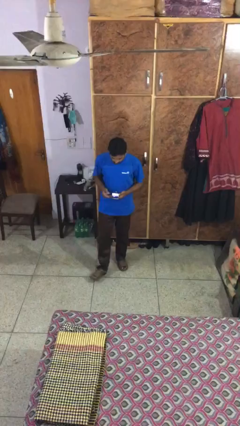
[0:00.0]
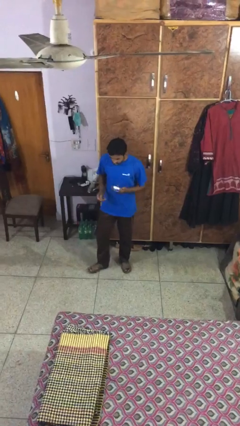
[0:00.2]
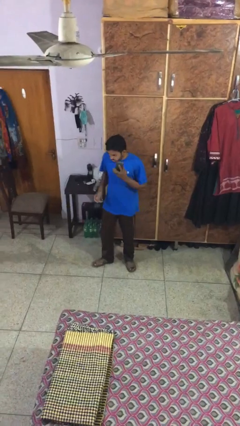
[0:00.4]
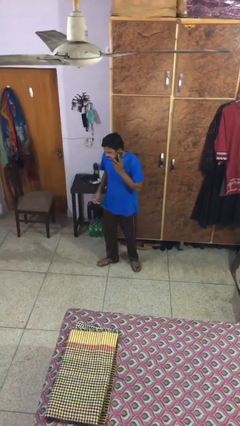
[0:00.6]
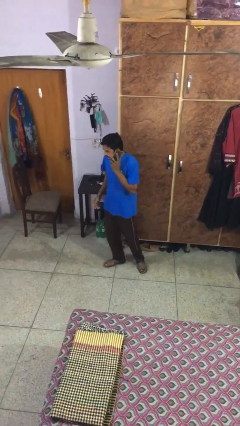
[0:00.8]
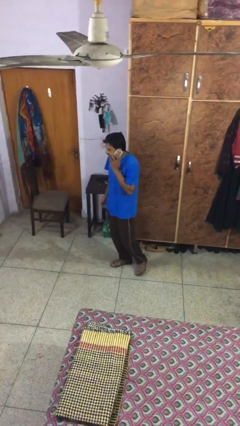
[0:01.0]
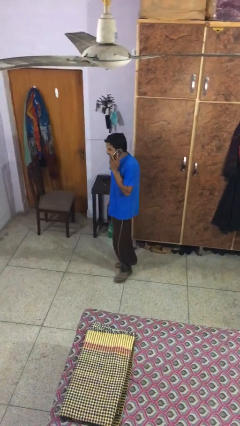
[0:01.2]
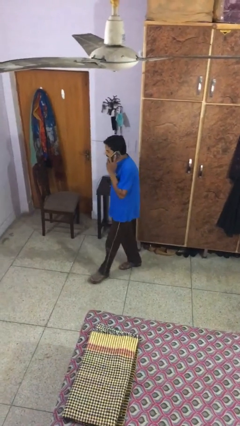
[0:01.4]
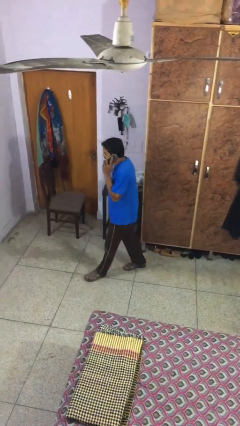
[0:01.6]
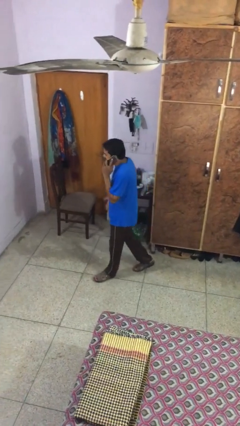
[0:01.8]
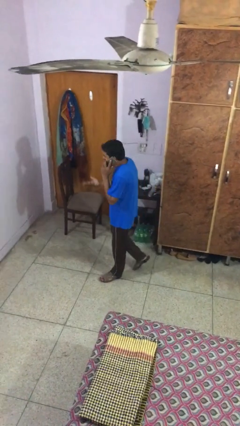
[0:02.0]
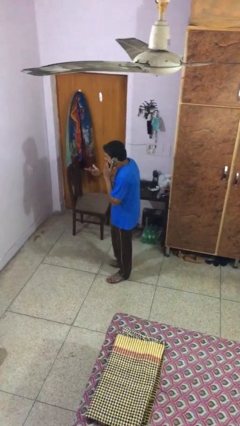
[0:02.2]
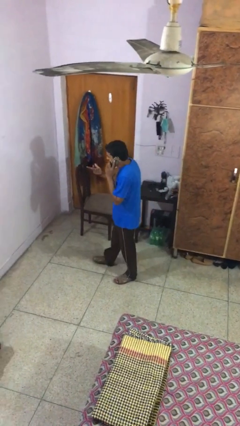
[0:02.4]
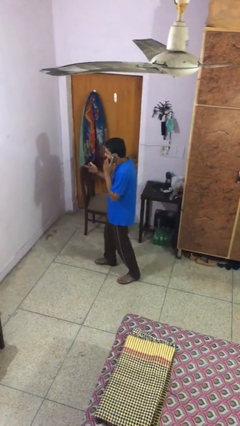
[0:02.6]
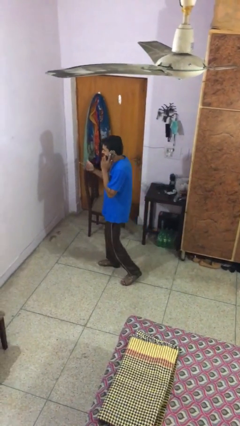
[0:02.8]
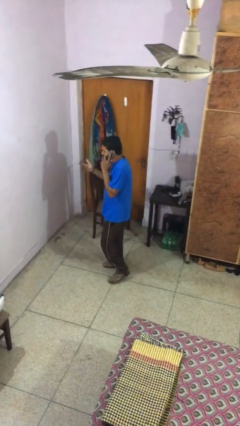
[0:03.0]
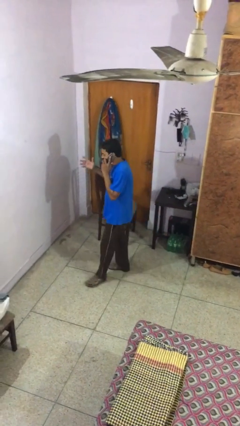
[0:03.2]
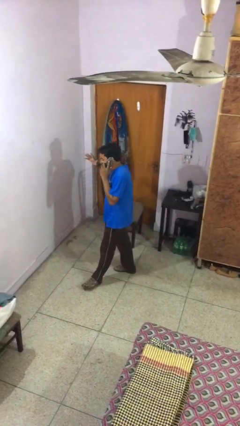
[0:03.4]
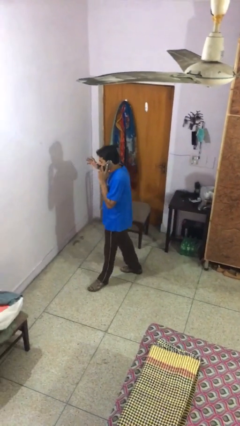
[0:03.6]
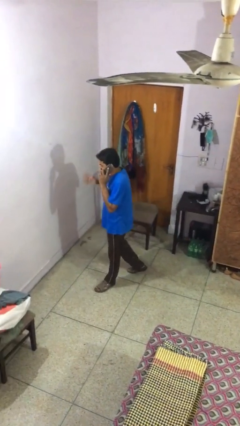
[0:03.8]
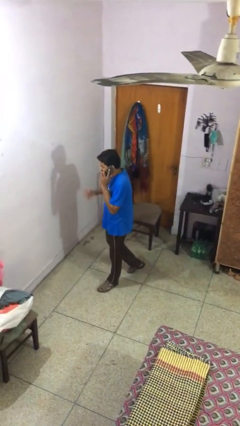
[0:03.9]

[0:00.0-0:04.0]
person talks on phone

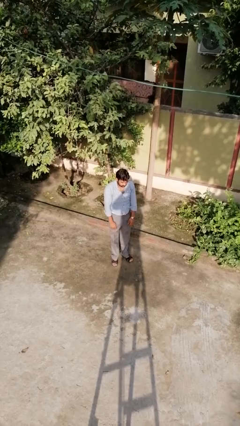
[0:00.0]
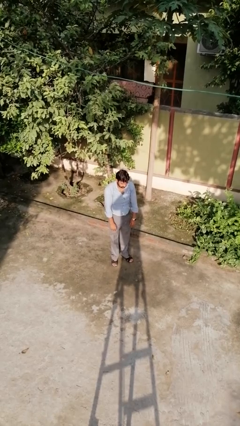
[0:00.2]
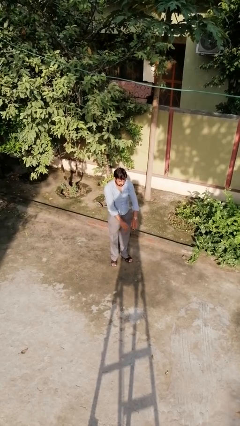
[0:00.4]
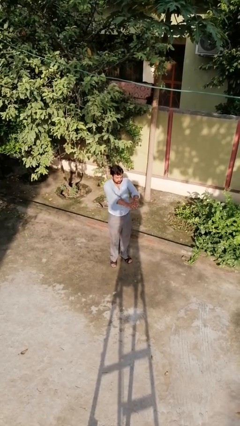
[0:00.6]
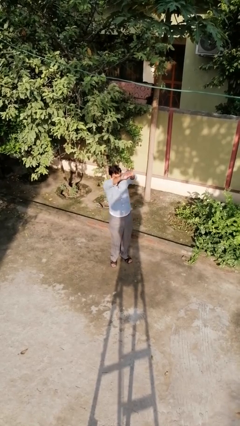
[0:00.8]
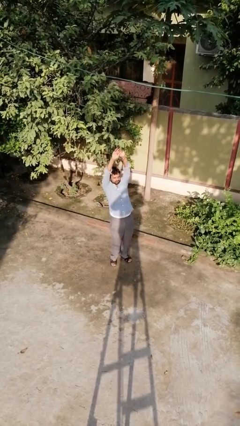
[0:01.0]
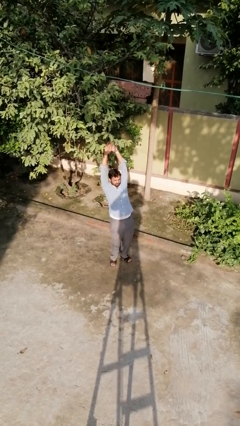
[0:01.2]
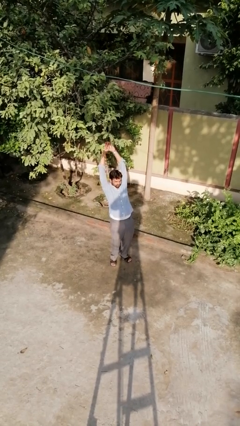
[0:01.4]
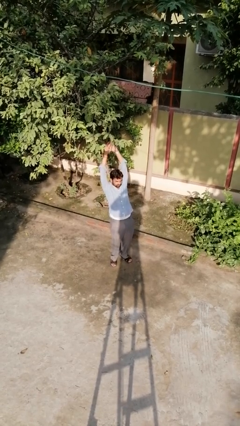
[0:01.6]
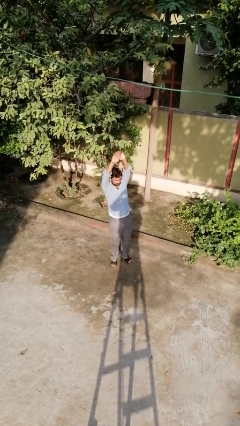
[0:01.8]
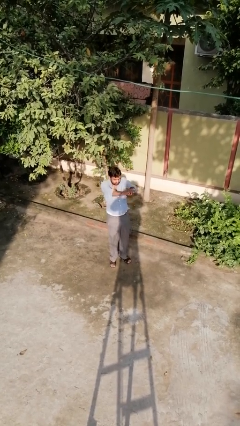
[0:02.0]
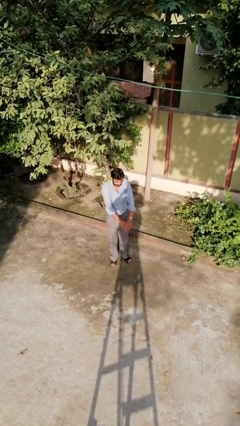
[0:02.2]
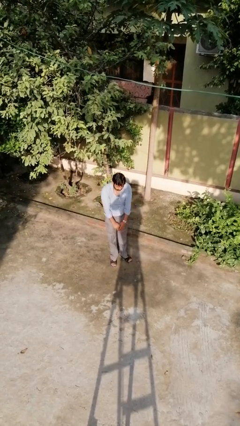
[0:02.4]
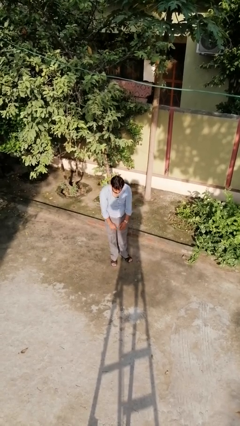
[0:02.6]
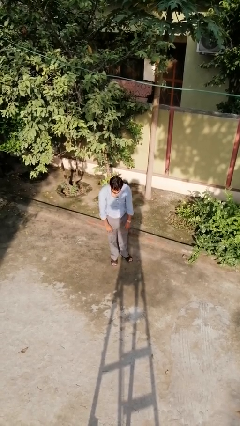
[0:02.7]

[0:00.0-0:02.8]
person stretches arms over head

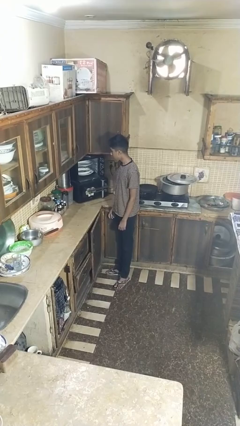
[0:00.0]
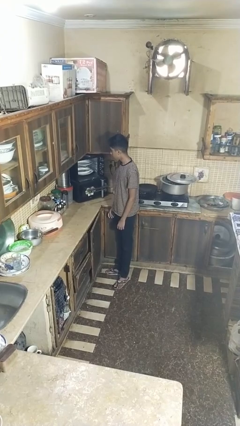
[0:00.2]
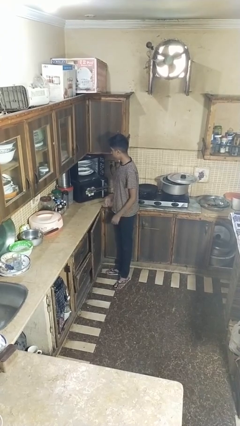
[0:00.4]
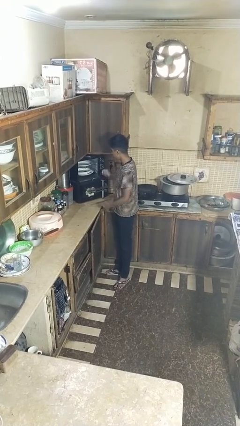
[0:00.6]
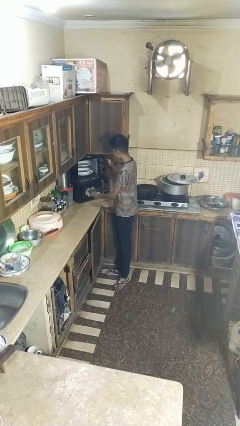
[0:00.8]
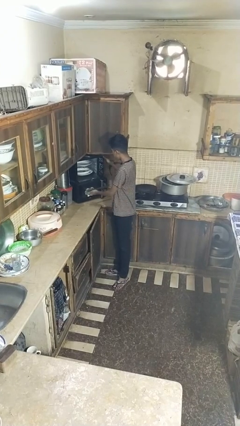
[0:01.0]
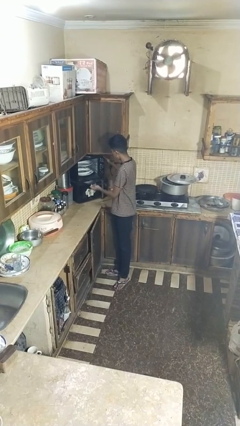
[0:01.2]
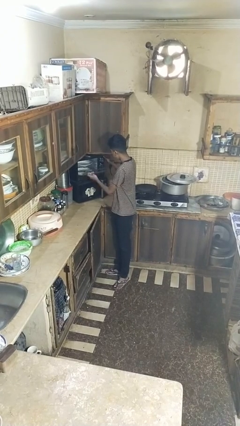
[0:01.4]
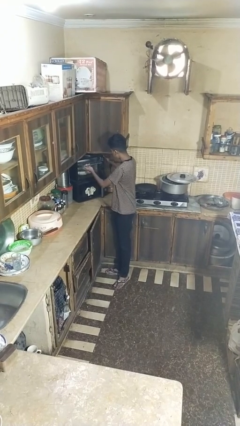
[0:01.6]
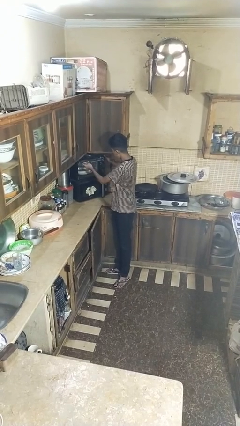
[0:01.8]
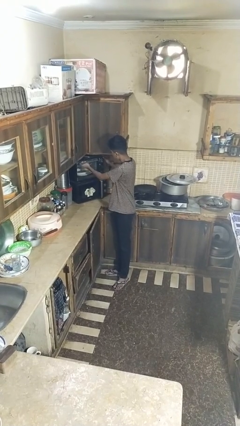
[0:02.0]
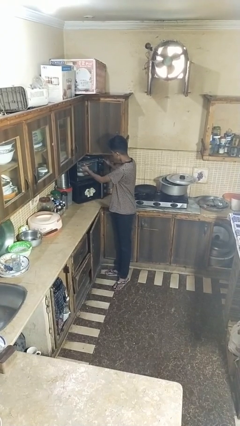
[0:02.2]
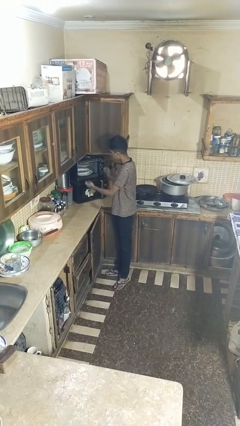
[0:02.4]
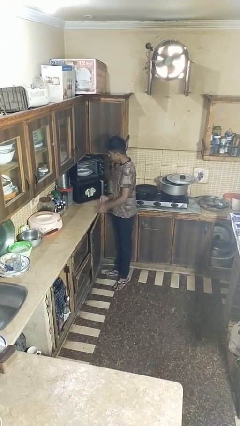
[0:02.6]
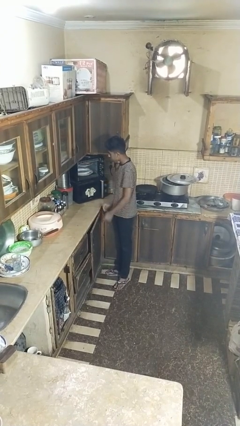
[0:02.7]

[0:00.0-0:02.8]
person closes dishwasher

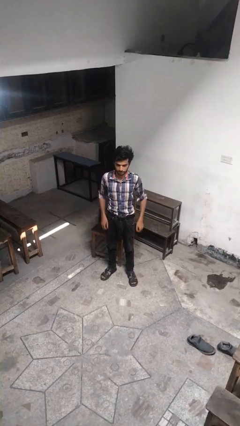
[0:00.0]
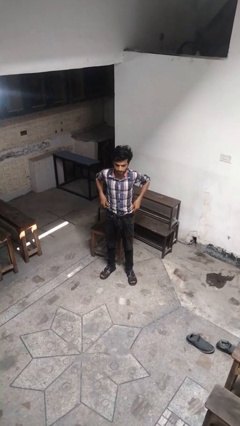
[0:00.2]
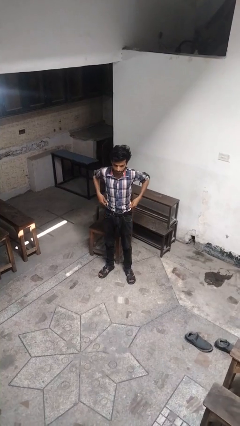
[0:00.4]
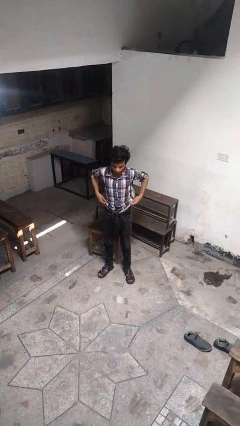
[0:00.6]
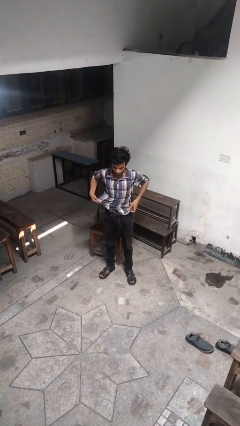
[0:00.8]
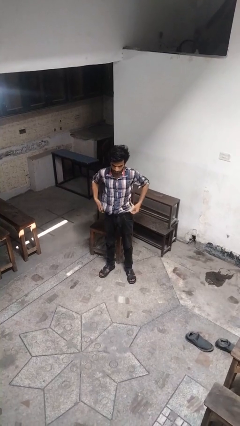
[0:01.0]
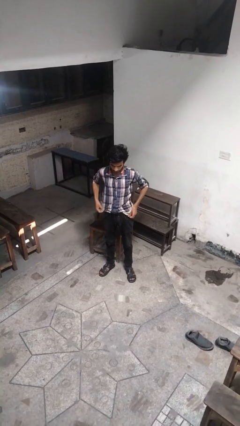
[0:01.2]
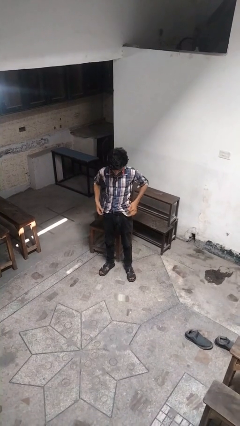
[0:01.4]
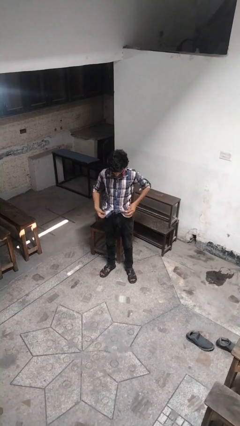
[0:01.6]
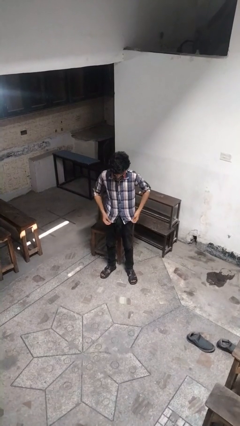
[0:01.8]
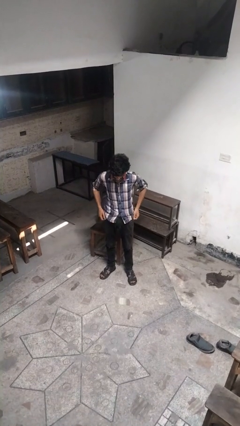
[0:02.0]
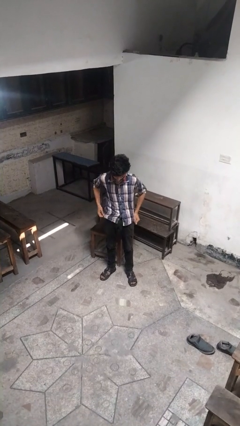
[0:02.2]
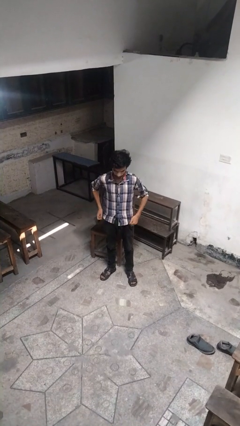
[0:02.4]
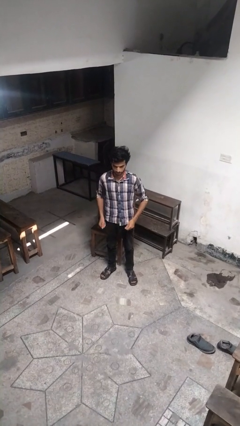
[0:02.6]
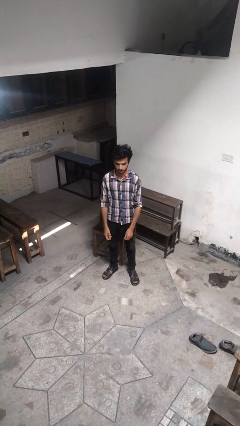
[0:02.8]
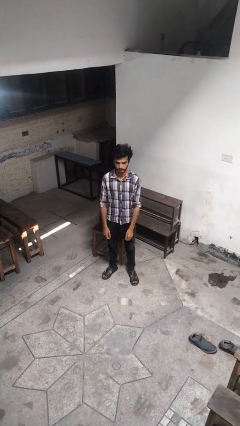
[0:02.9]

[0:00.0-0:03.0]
person untucks shirt

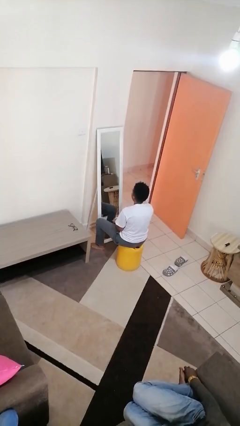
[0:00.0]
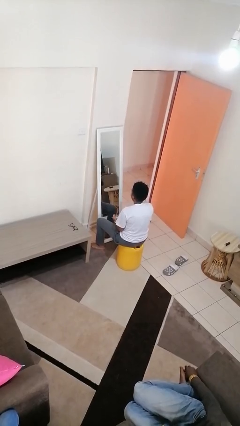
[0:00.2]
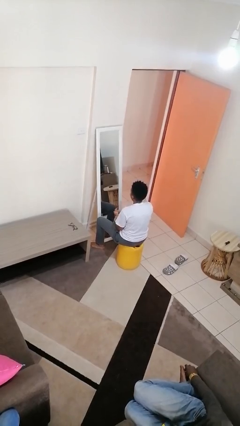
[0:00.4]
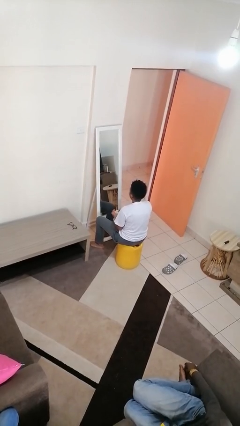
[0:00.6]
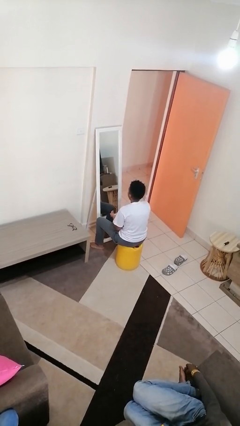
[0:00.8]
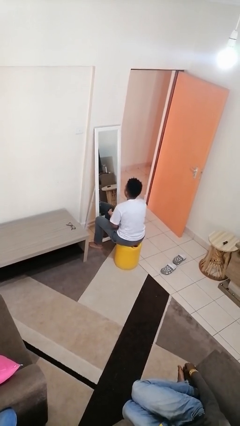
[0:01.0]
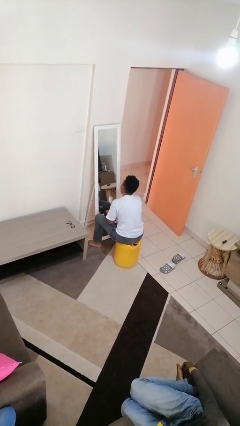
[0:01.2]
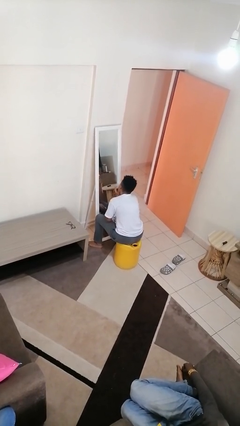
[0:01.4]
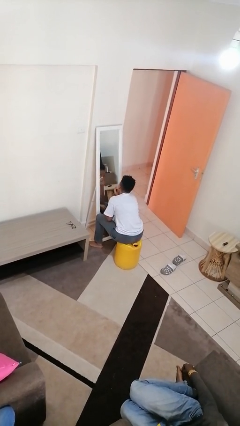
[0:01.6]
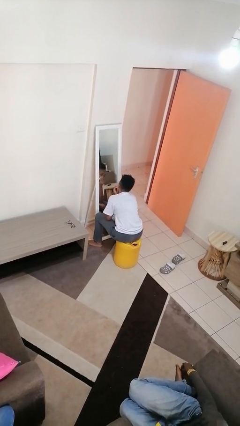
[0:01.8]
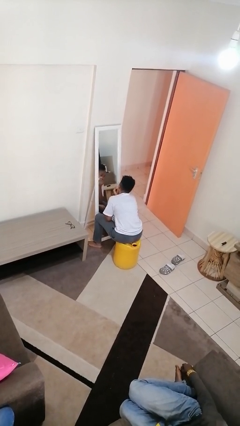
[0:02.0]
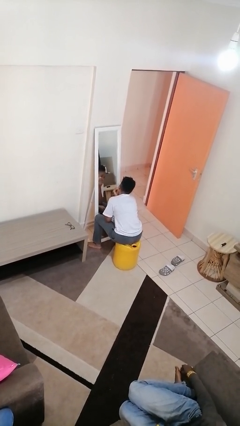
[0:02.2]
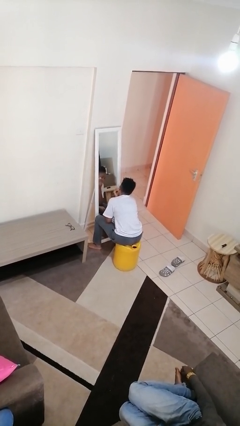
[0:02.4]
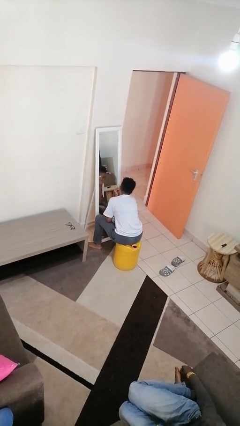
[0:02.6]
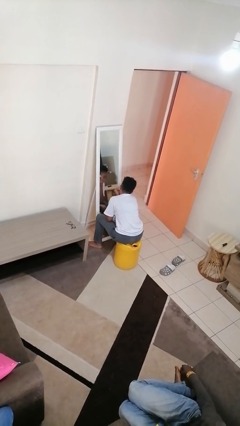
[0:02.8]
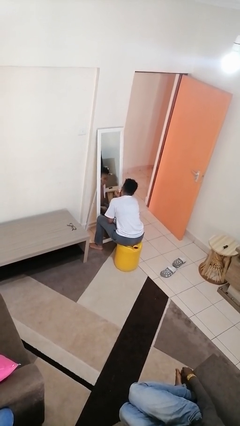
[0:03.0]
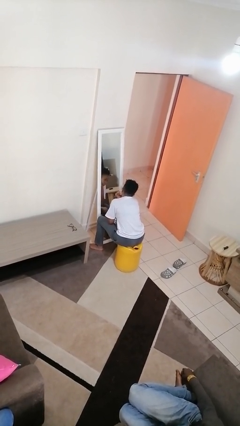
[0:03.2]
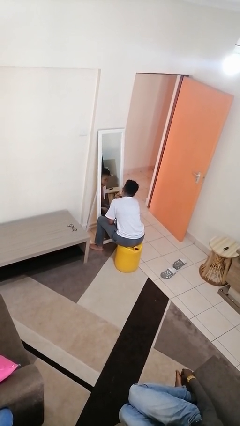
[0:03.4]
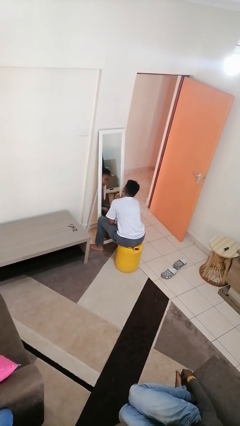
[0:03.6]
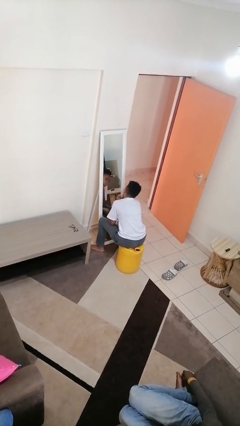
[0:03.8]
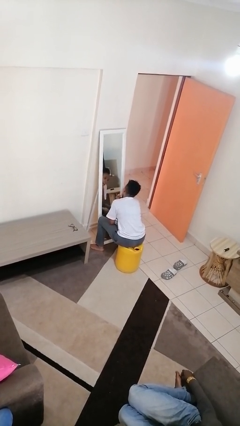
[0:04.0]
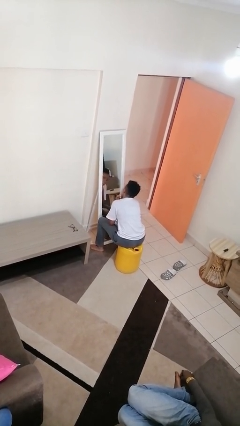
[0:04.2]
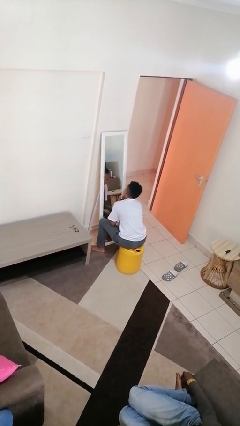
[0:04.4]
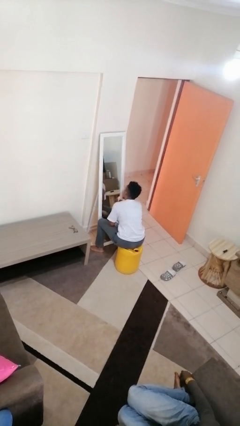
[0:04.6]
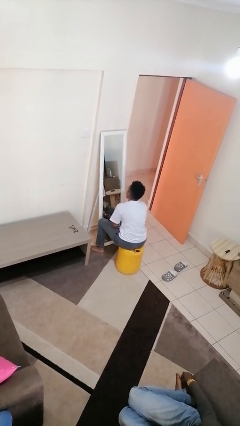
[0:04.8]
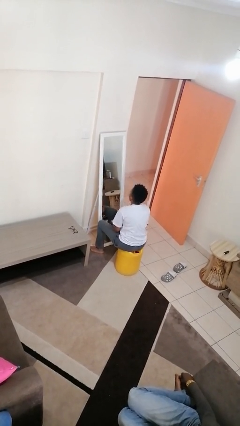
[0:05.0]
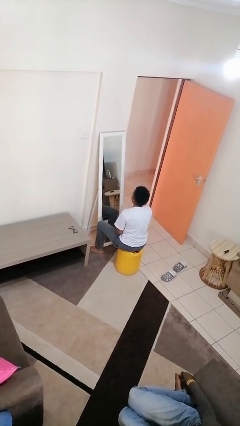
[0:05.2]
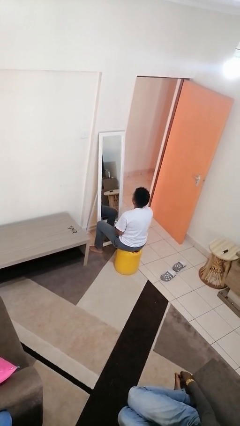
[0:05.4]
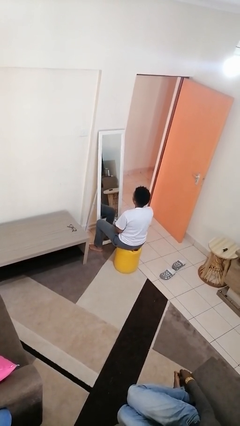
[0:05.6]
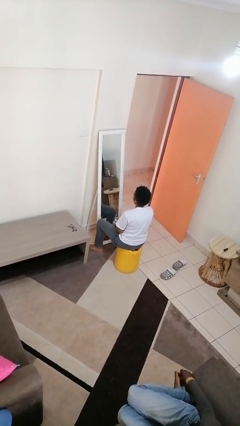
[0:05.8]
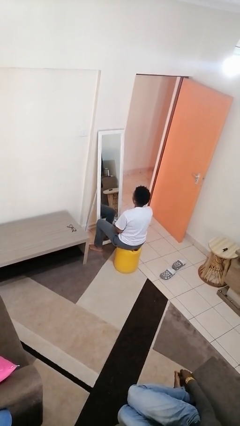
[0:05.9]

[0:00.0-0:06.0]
person applies foundation makeup
